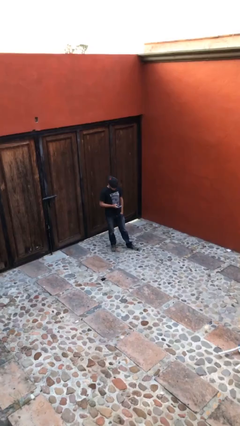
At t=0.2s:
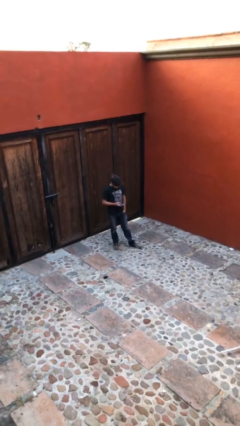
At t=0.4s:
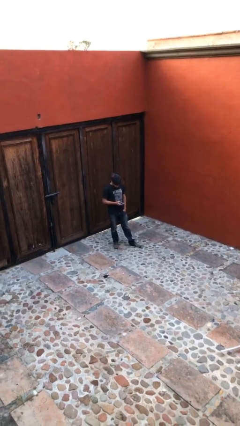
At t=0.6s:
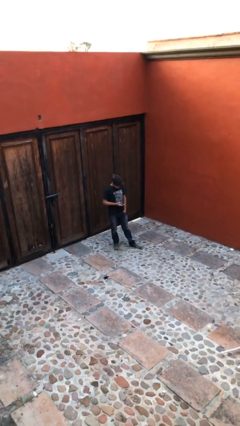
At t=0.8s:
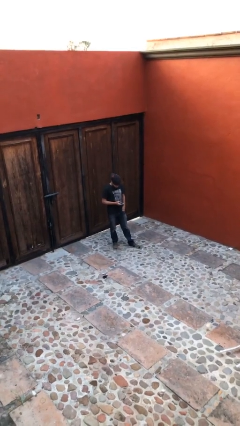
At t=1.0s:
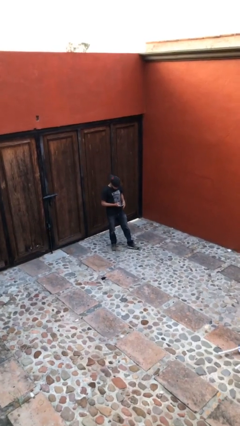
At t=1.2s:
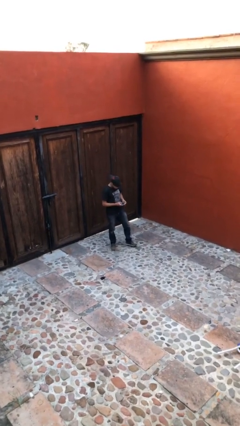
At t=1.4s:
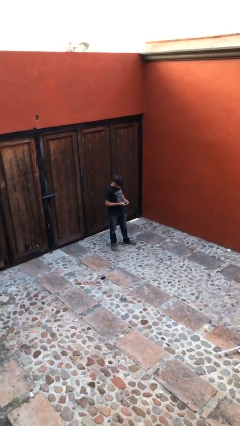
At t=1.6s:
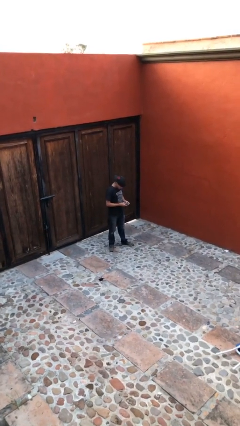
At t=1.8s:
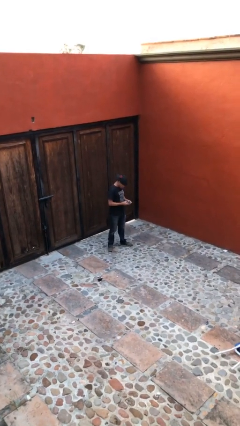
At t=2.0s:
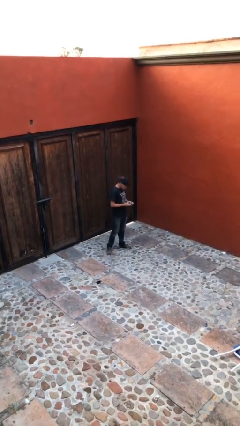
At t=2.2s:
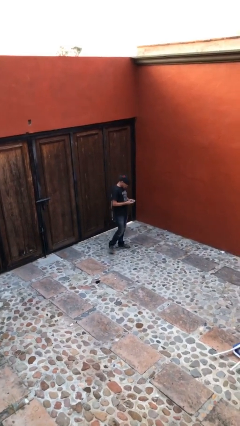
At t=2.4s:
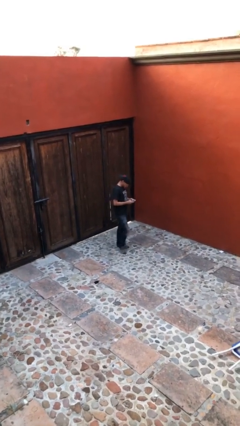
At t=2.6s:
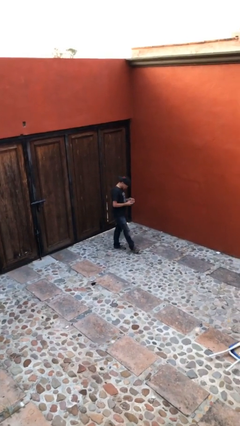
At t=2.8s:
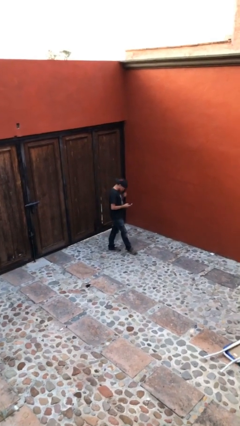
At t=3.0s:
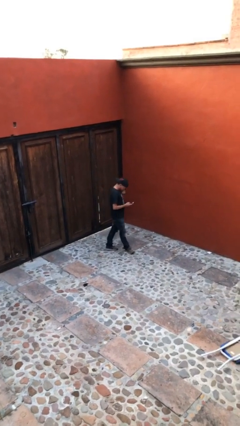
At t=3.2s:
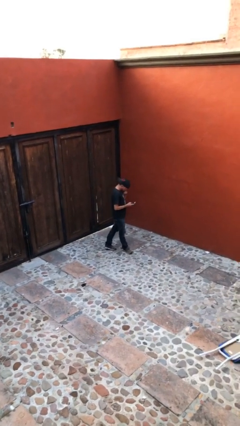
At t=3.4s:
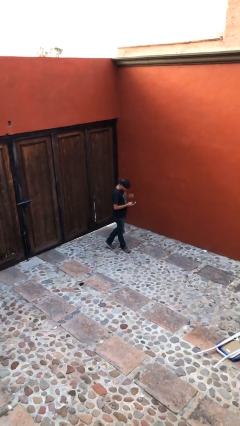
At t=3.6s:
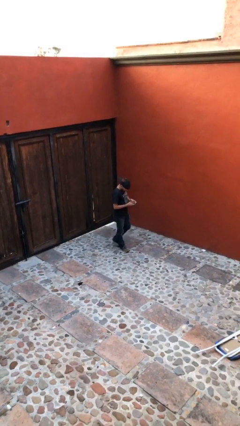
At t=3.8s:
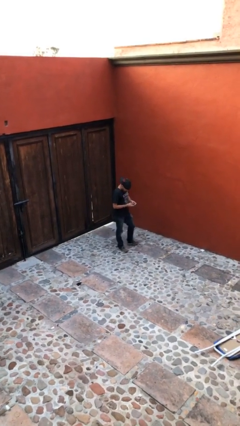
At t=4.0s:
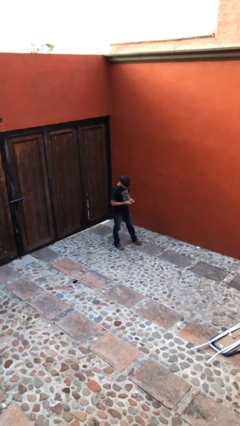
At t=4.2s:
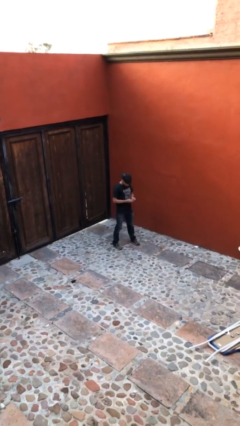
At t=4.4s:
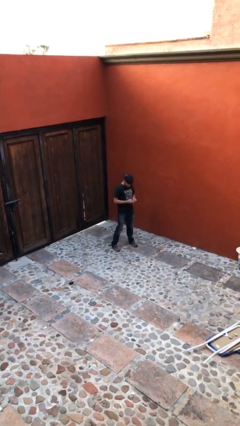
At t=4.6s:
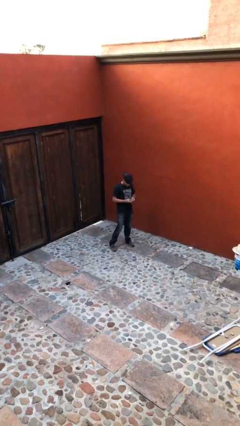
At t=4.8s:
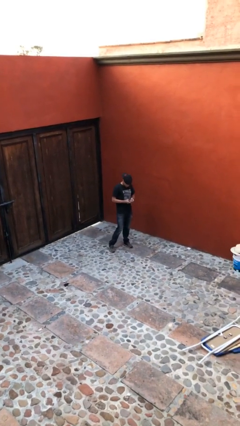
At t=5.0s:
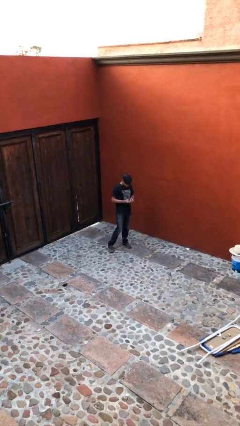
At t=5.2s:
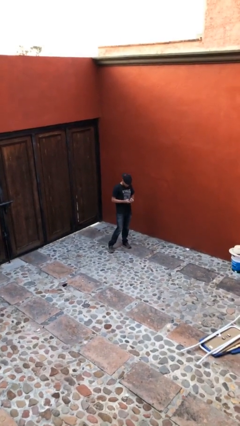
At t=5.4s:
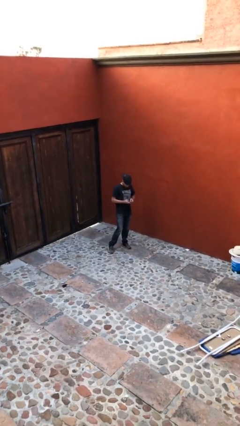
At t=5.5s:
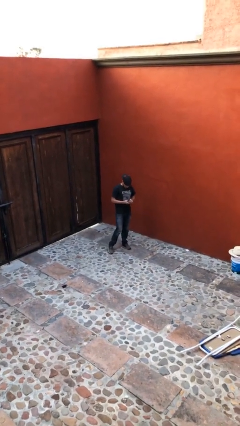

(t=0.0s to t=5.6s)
person texts on phone

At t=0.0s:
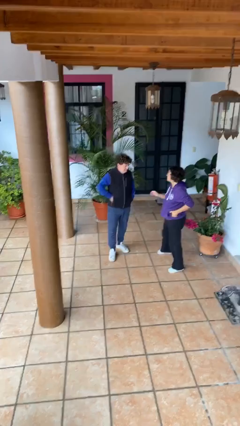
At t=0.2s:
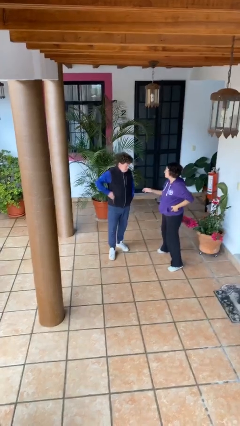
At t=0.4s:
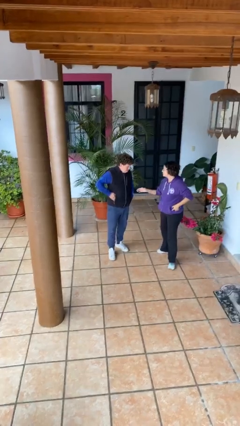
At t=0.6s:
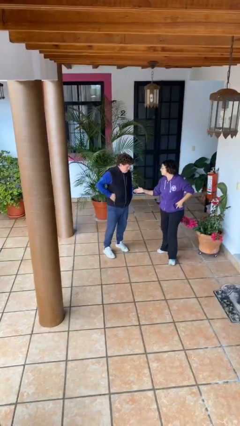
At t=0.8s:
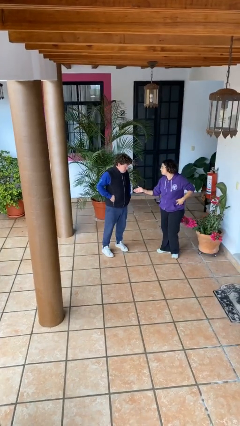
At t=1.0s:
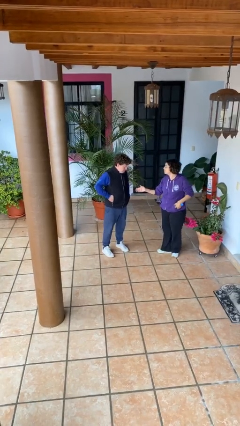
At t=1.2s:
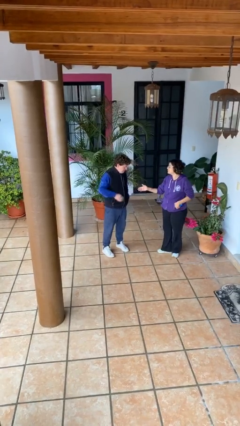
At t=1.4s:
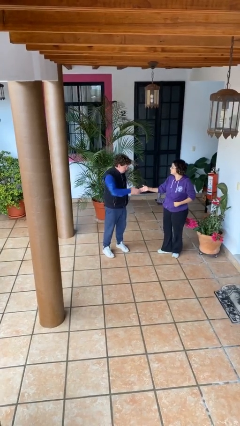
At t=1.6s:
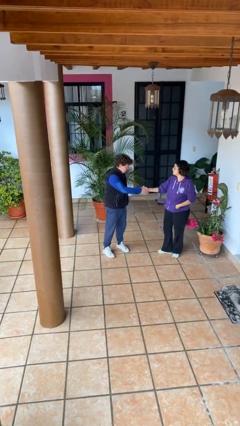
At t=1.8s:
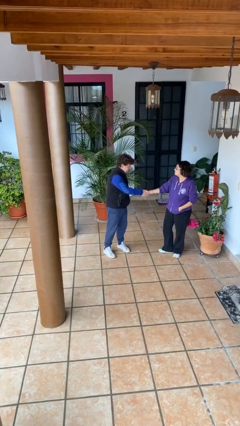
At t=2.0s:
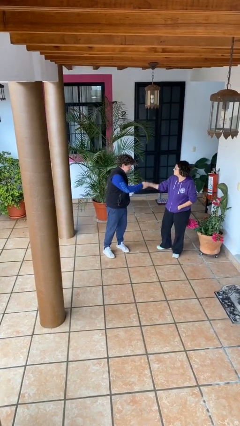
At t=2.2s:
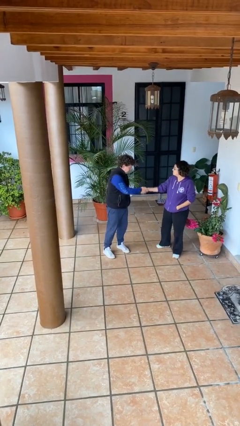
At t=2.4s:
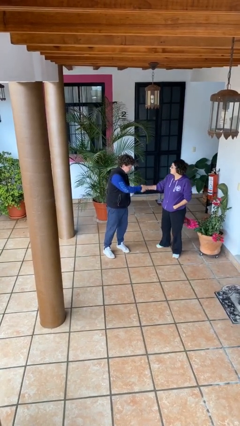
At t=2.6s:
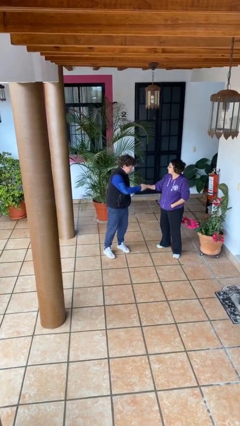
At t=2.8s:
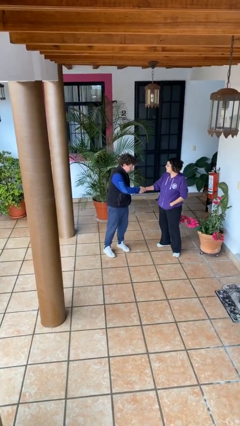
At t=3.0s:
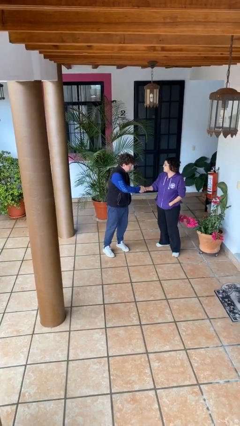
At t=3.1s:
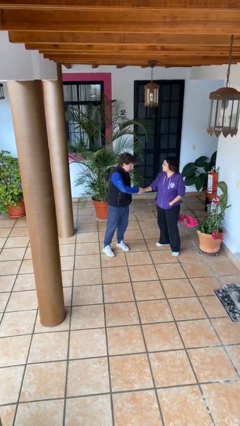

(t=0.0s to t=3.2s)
person shakes hand

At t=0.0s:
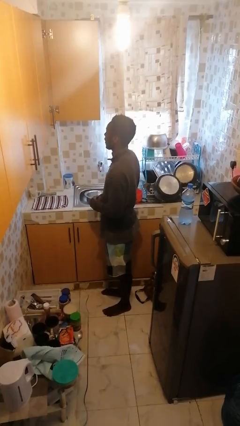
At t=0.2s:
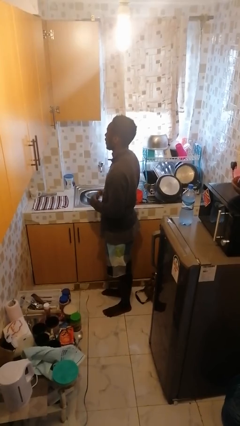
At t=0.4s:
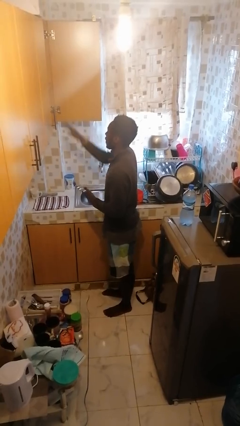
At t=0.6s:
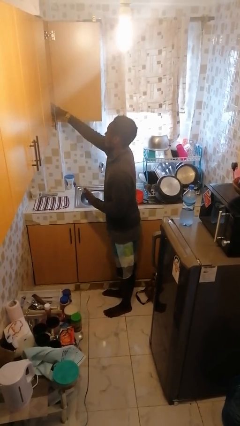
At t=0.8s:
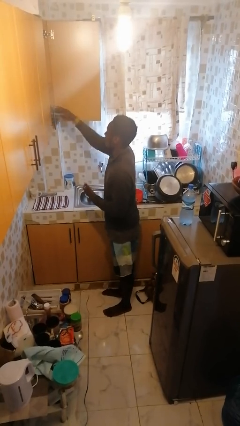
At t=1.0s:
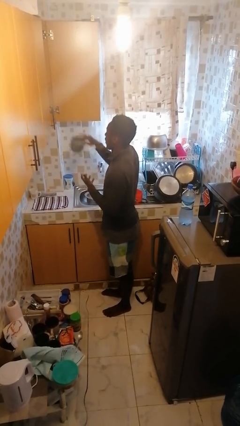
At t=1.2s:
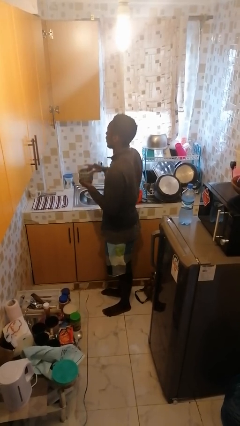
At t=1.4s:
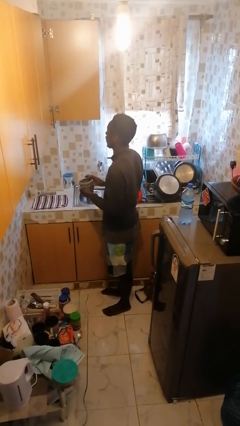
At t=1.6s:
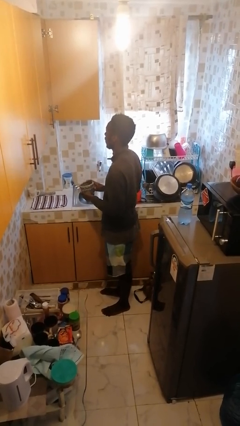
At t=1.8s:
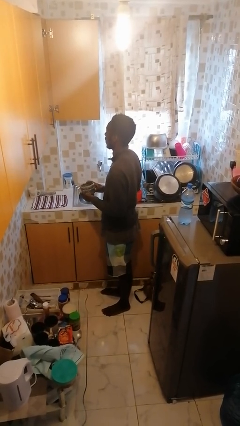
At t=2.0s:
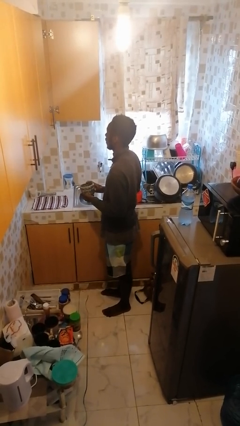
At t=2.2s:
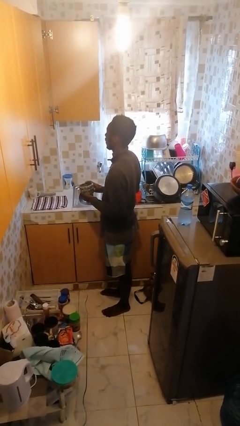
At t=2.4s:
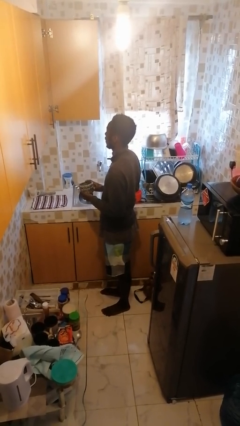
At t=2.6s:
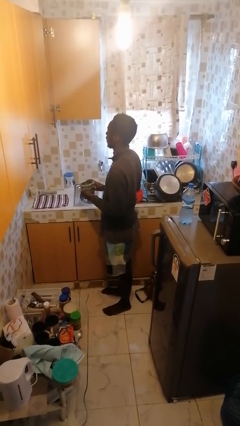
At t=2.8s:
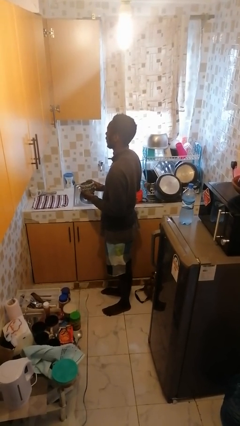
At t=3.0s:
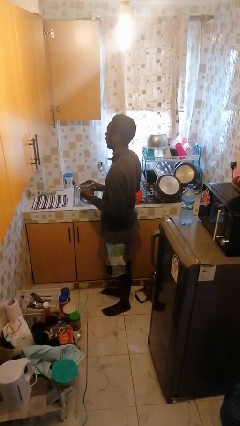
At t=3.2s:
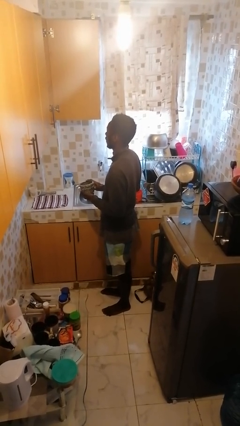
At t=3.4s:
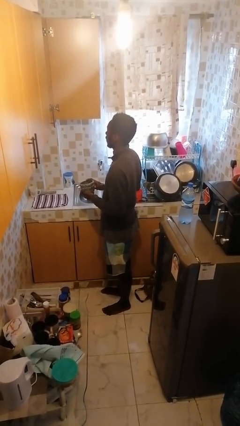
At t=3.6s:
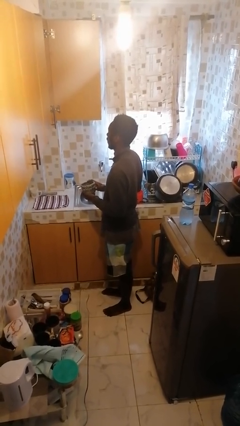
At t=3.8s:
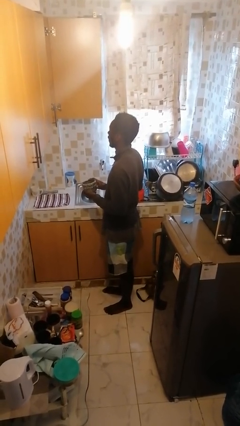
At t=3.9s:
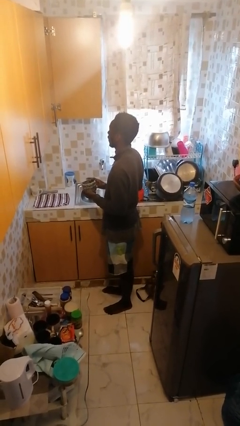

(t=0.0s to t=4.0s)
person picks up object from cabinet

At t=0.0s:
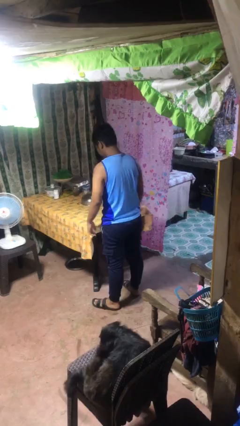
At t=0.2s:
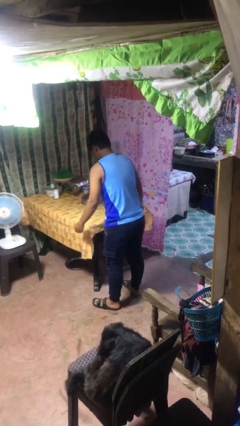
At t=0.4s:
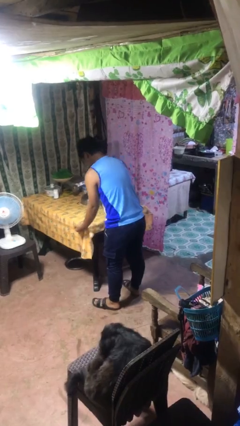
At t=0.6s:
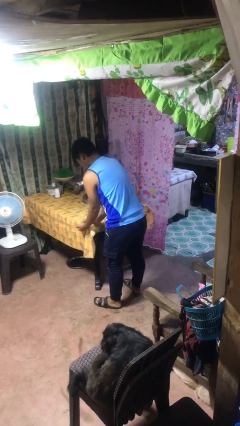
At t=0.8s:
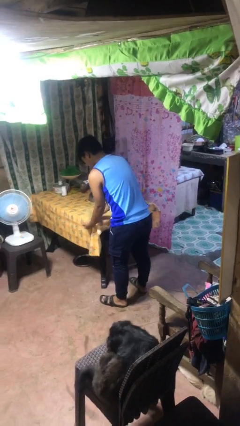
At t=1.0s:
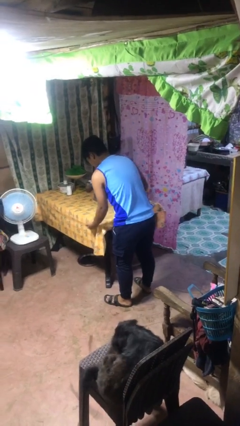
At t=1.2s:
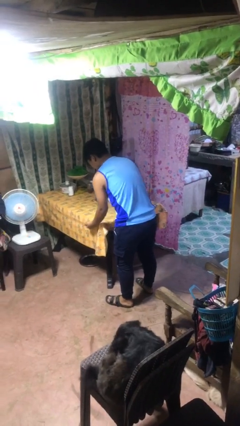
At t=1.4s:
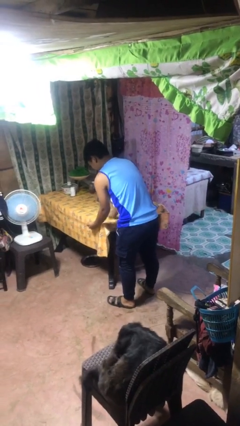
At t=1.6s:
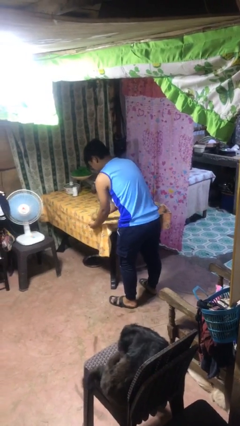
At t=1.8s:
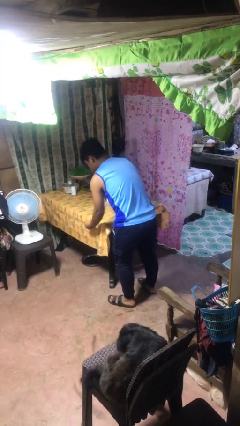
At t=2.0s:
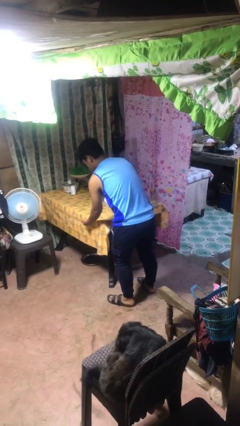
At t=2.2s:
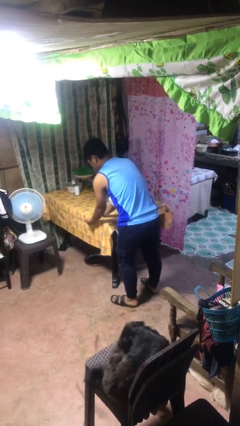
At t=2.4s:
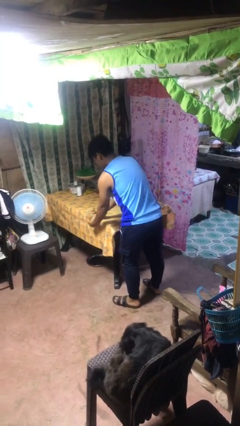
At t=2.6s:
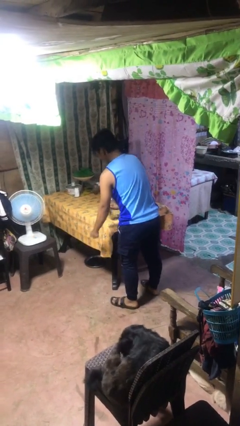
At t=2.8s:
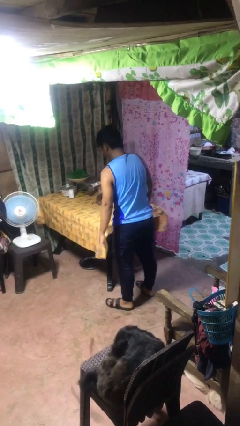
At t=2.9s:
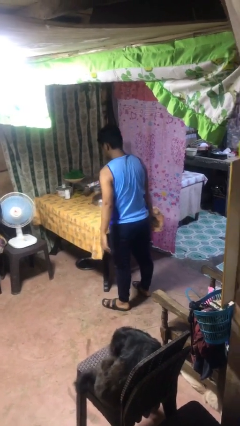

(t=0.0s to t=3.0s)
person cleans table with rag

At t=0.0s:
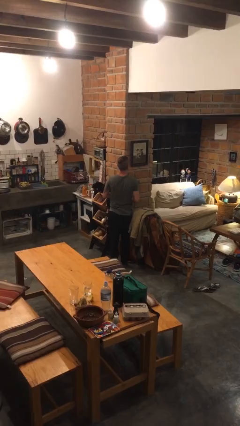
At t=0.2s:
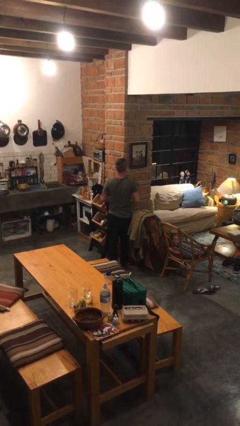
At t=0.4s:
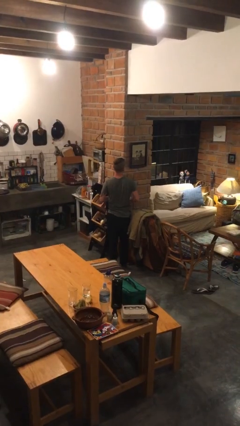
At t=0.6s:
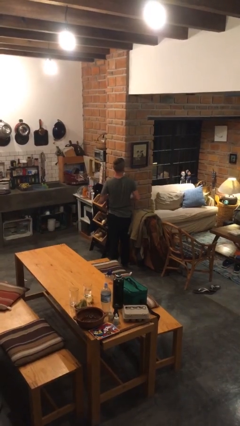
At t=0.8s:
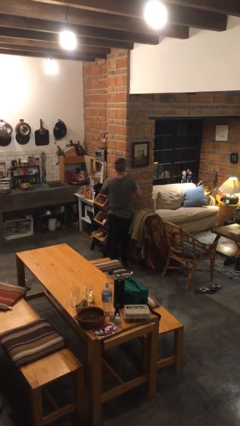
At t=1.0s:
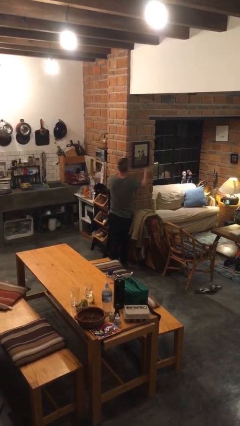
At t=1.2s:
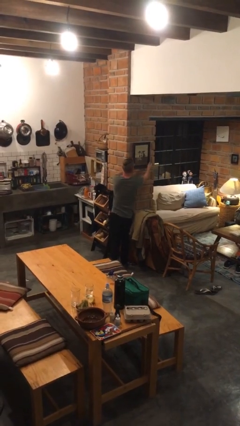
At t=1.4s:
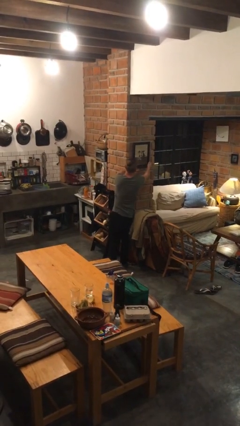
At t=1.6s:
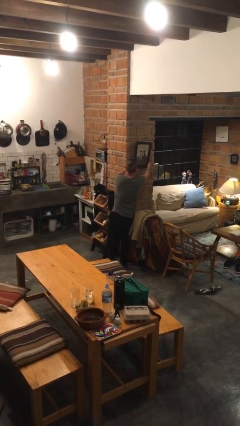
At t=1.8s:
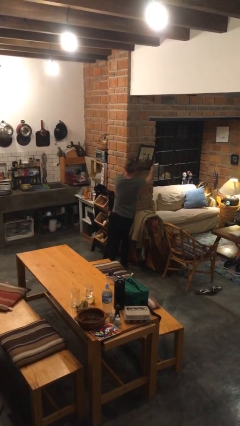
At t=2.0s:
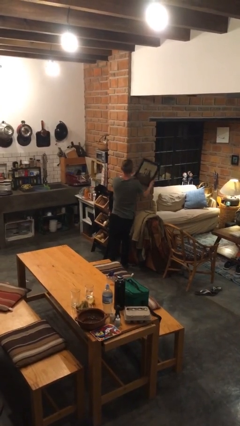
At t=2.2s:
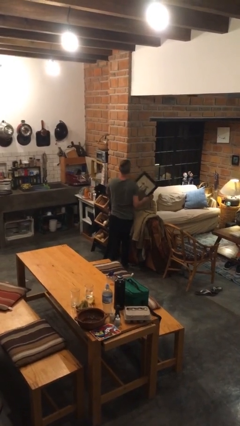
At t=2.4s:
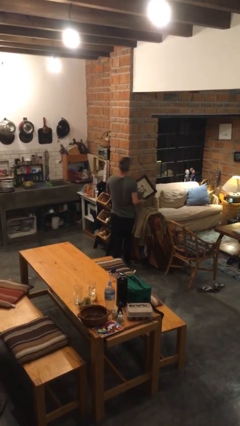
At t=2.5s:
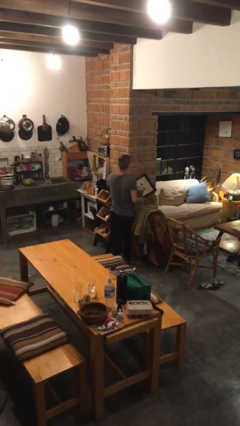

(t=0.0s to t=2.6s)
person takes down picture frame
